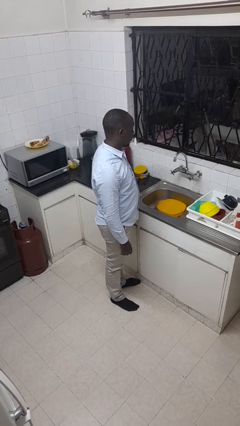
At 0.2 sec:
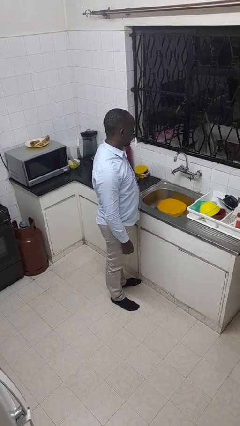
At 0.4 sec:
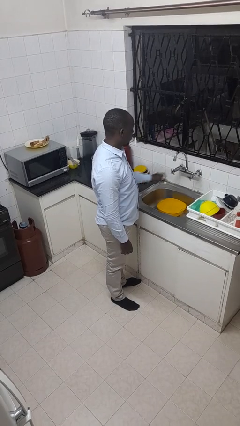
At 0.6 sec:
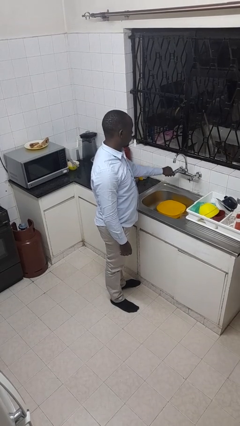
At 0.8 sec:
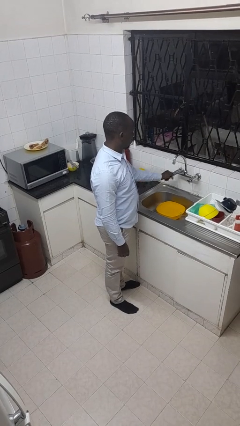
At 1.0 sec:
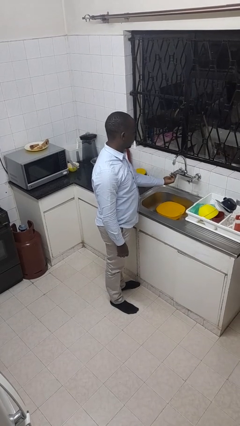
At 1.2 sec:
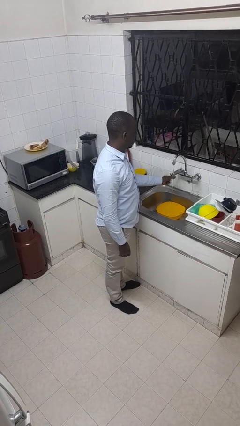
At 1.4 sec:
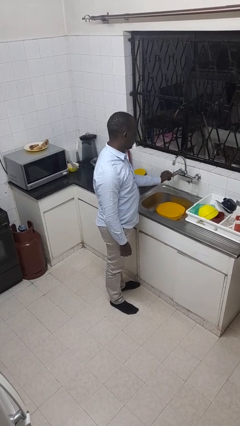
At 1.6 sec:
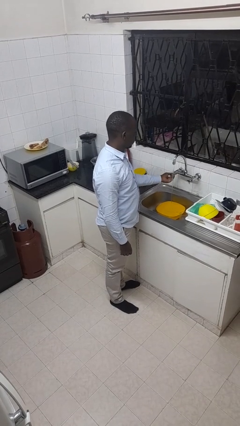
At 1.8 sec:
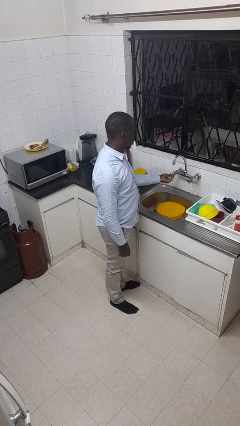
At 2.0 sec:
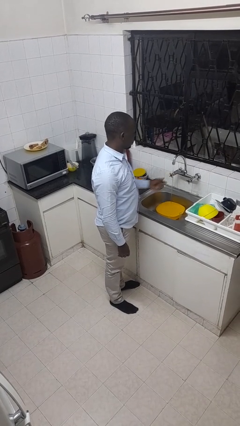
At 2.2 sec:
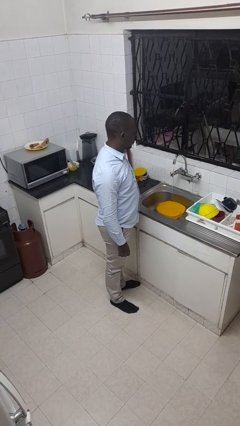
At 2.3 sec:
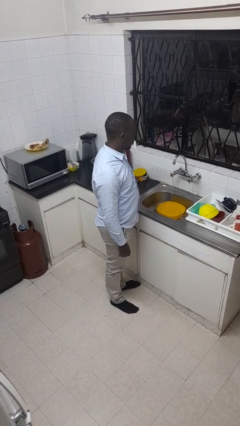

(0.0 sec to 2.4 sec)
person turns on faucet

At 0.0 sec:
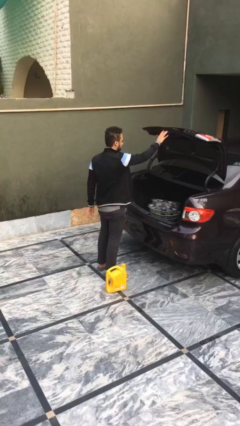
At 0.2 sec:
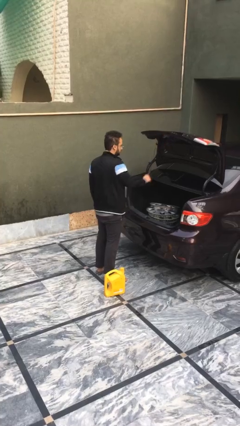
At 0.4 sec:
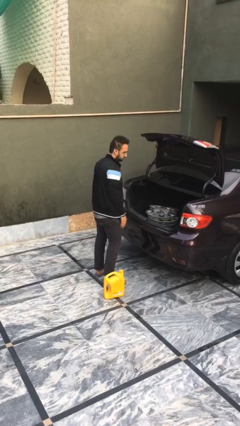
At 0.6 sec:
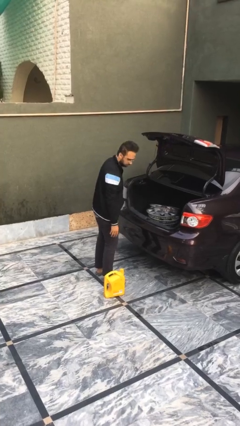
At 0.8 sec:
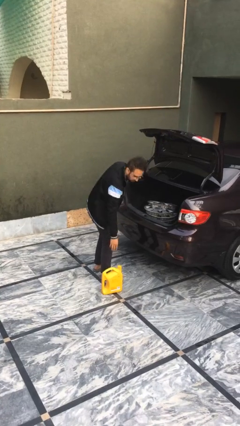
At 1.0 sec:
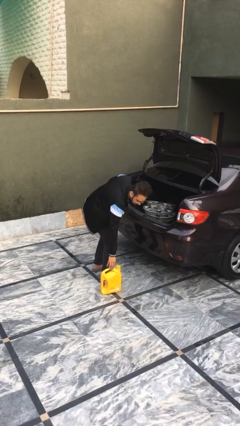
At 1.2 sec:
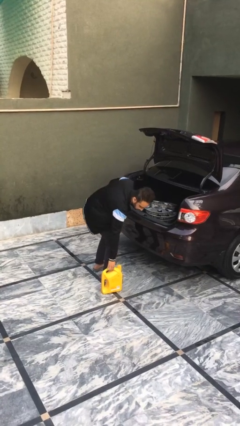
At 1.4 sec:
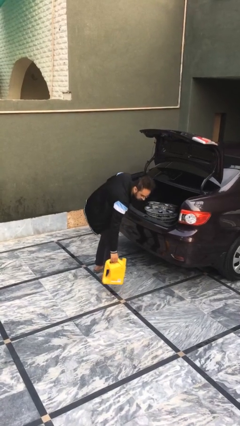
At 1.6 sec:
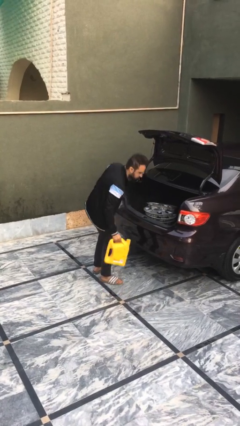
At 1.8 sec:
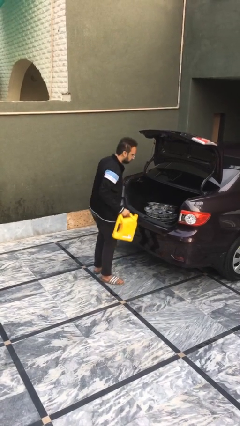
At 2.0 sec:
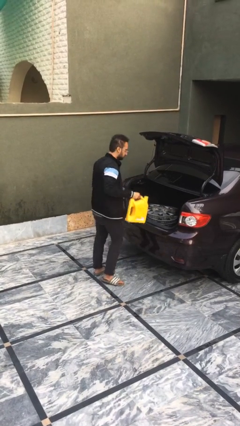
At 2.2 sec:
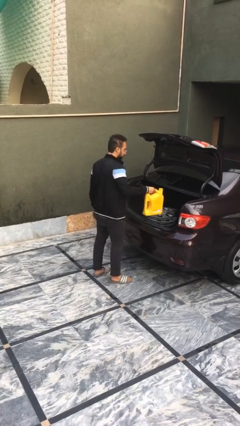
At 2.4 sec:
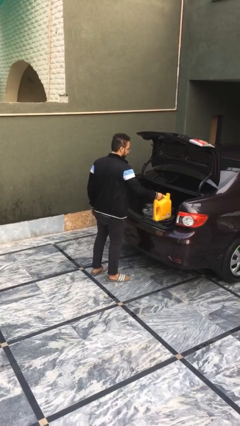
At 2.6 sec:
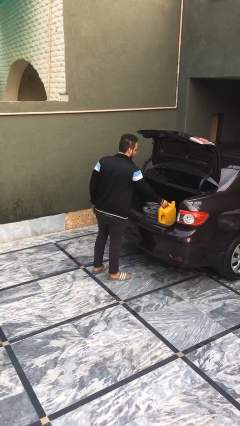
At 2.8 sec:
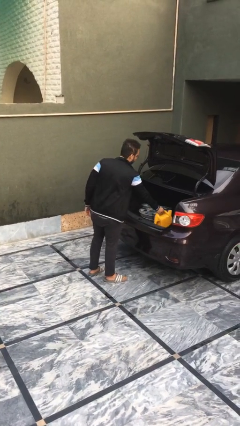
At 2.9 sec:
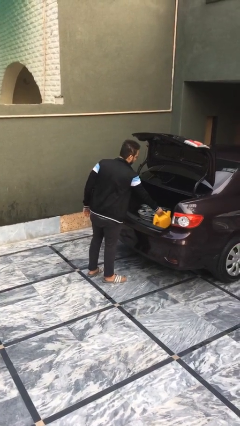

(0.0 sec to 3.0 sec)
person loads car

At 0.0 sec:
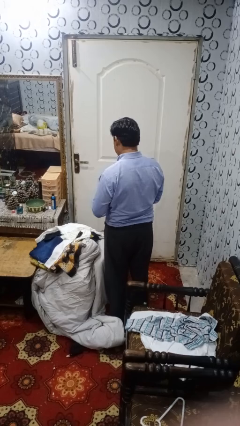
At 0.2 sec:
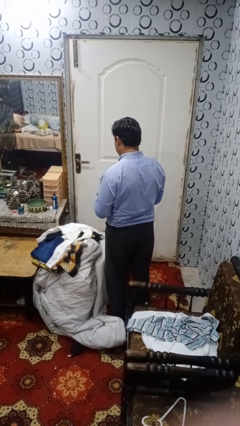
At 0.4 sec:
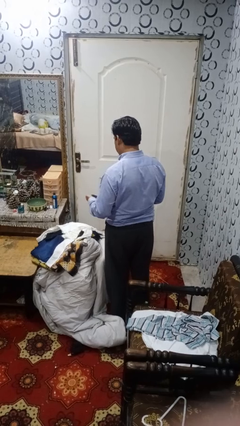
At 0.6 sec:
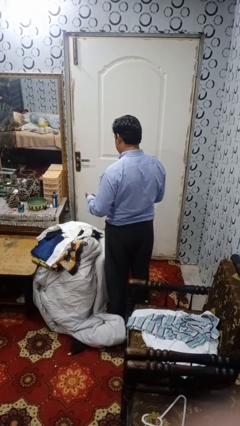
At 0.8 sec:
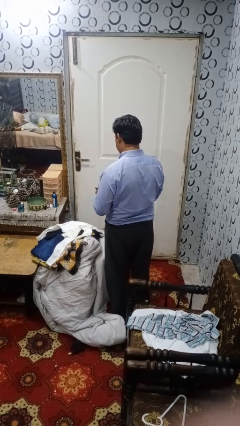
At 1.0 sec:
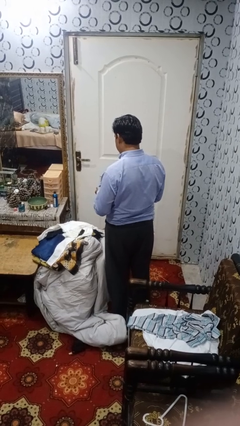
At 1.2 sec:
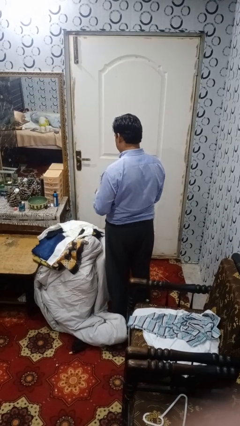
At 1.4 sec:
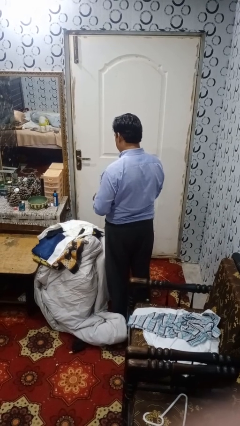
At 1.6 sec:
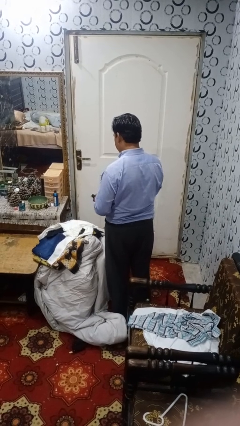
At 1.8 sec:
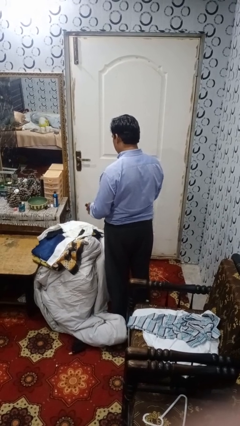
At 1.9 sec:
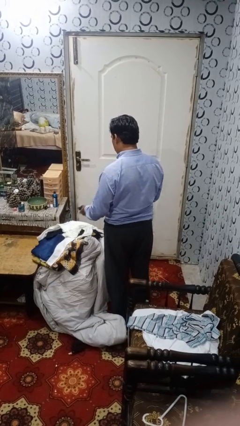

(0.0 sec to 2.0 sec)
person folds socks

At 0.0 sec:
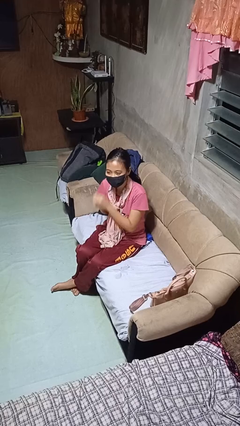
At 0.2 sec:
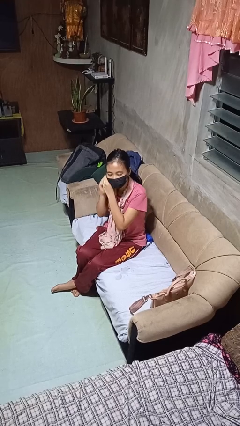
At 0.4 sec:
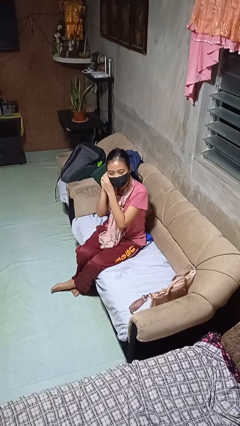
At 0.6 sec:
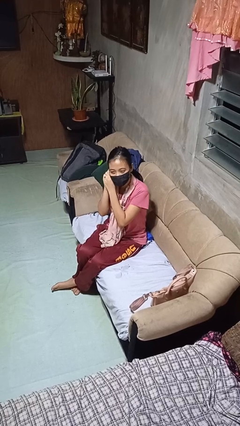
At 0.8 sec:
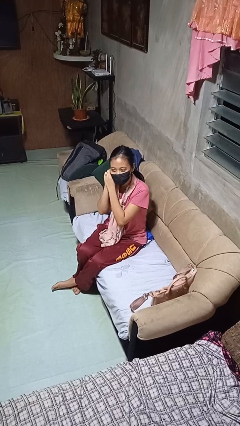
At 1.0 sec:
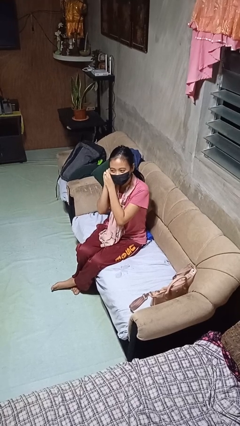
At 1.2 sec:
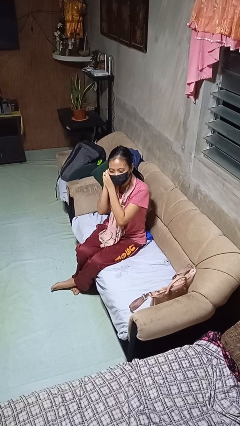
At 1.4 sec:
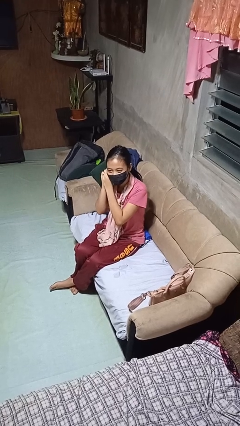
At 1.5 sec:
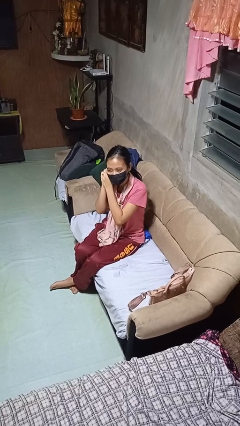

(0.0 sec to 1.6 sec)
person puts on earrings

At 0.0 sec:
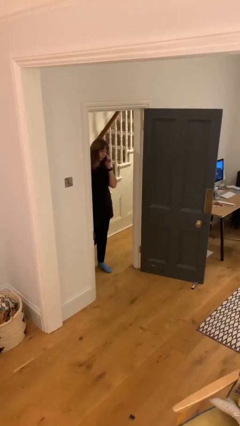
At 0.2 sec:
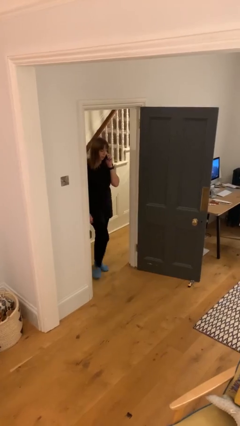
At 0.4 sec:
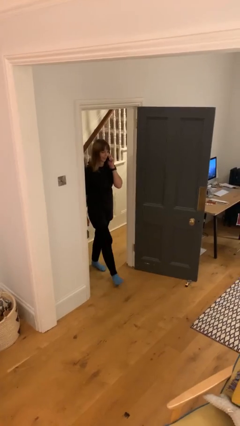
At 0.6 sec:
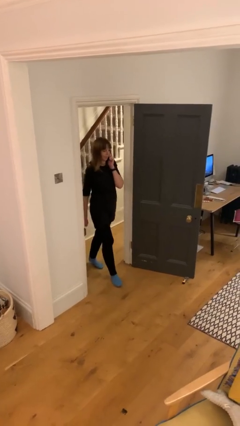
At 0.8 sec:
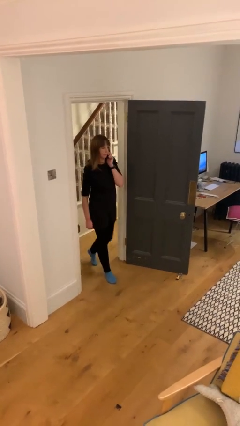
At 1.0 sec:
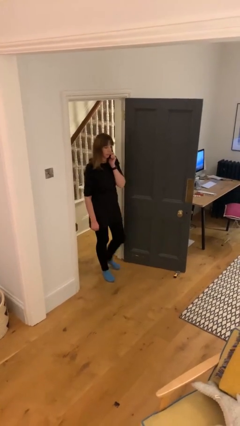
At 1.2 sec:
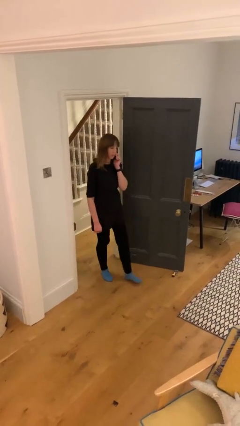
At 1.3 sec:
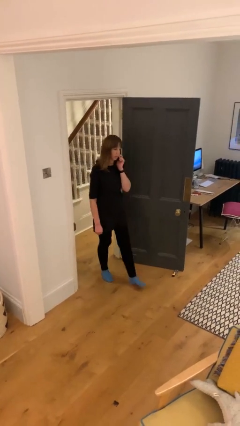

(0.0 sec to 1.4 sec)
person enters scene through structure

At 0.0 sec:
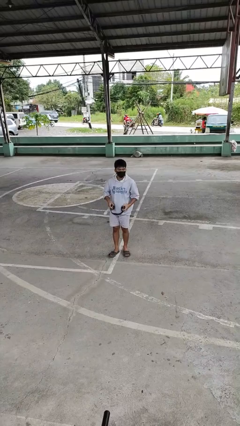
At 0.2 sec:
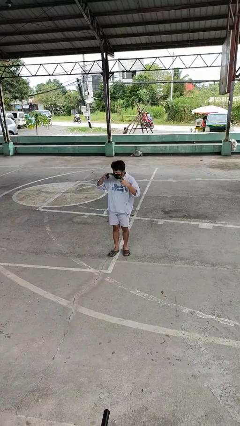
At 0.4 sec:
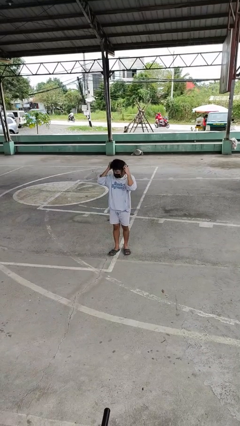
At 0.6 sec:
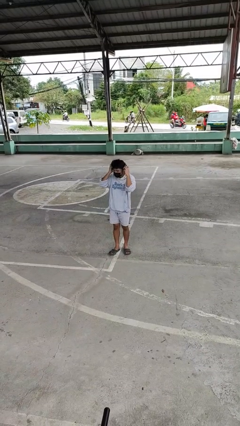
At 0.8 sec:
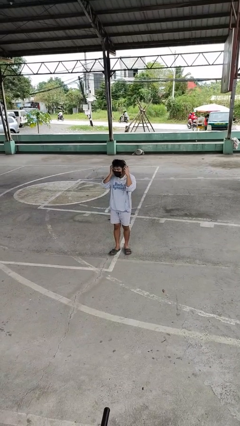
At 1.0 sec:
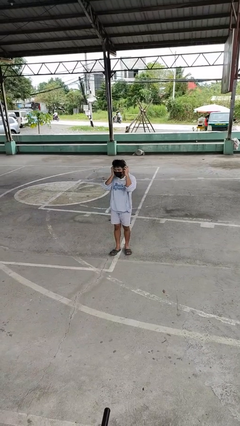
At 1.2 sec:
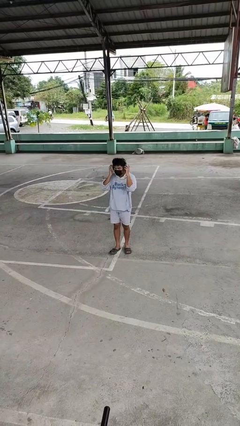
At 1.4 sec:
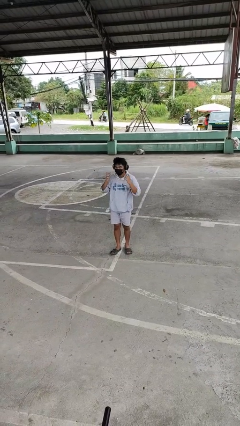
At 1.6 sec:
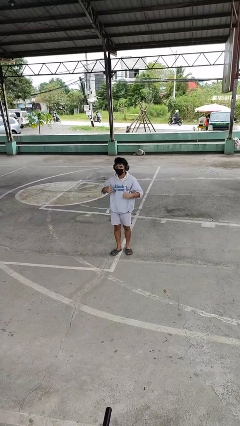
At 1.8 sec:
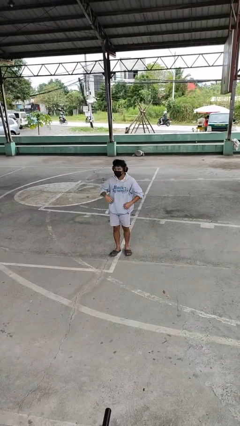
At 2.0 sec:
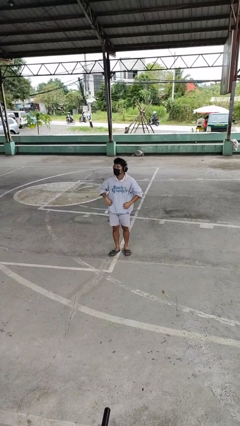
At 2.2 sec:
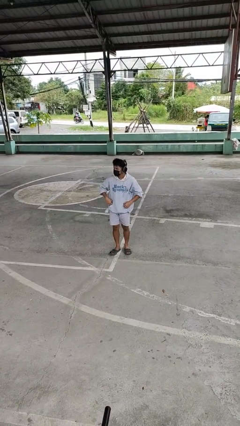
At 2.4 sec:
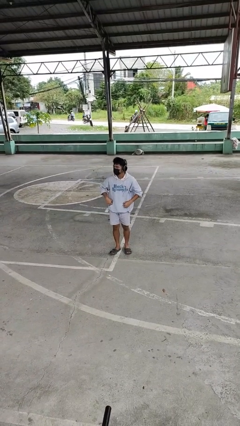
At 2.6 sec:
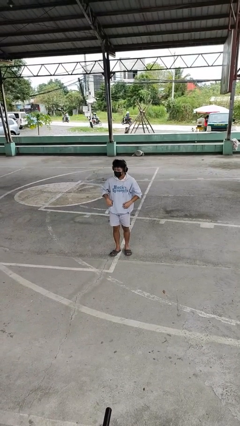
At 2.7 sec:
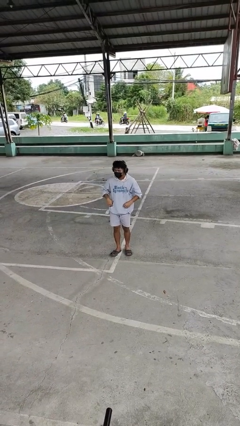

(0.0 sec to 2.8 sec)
person puts on headphones

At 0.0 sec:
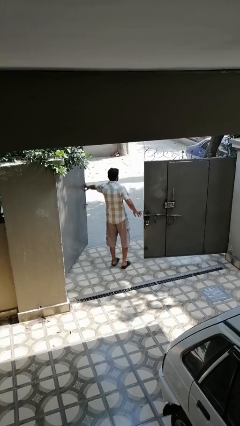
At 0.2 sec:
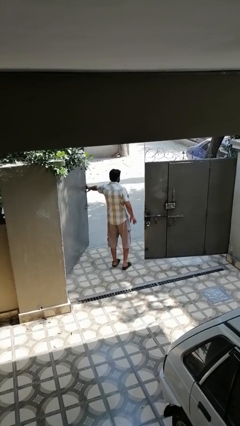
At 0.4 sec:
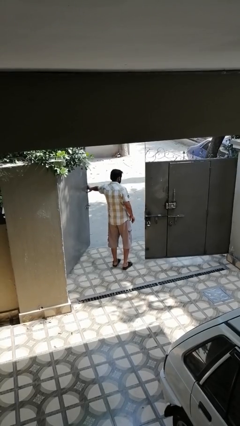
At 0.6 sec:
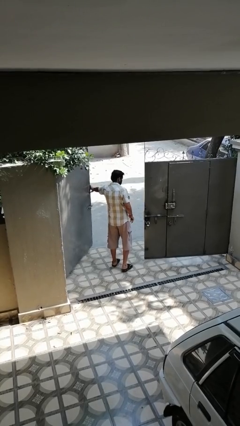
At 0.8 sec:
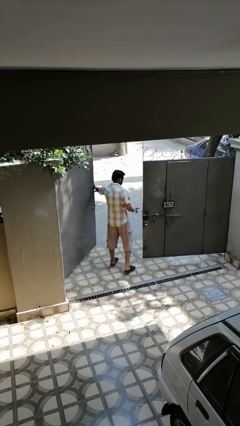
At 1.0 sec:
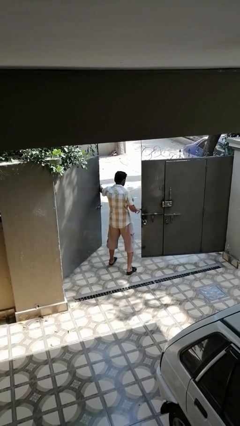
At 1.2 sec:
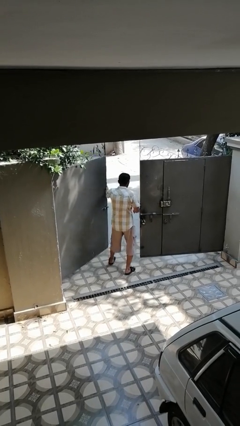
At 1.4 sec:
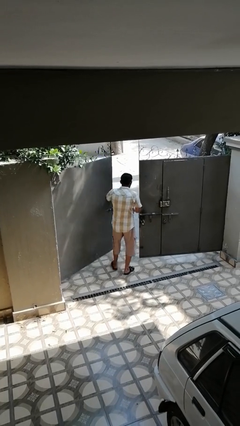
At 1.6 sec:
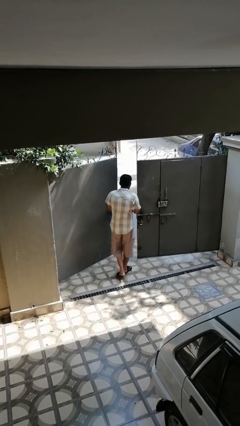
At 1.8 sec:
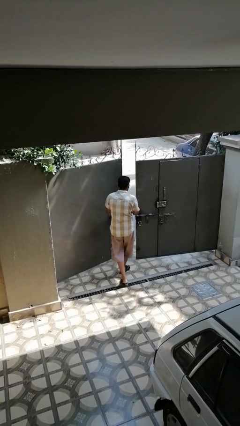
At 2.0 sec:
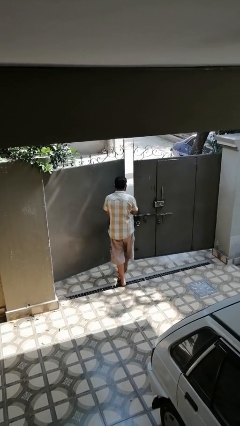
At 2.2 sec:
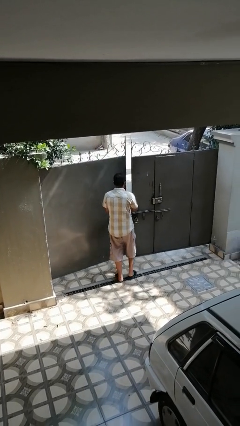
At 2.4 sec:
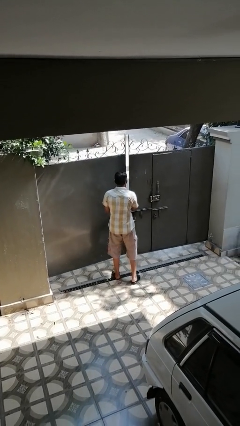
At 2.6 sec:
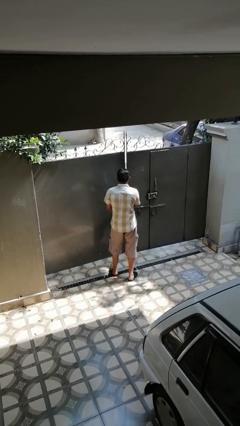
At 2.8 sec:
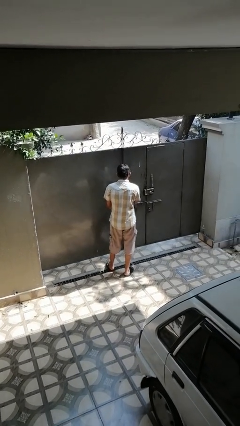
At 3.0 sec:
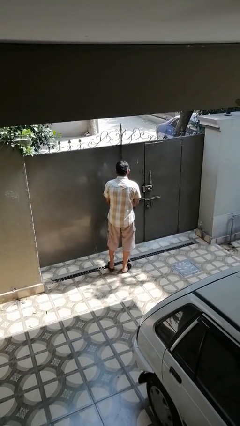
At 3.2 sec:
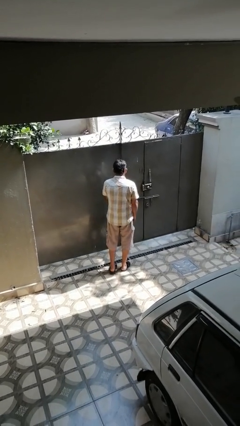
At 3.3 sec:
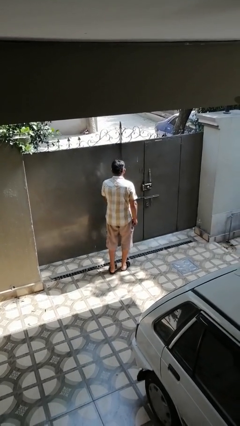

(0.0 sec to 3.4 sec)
person closes gate

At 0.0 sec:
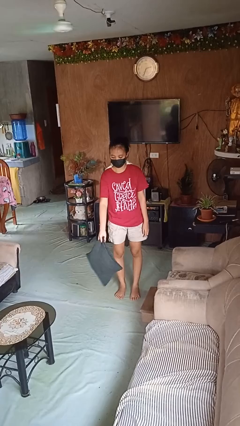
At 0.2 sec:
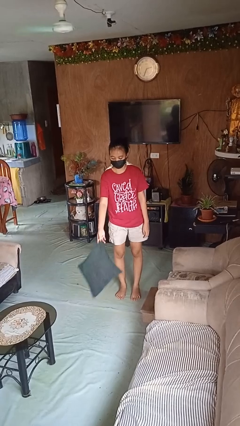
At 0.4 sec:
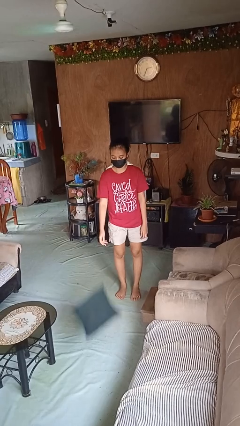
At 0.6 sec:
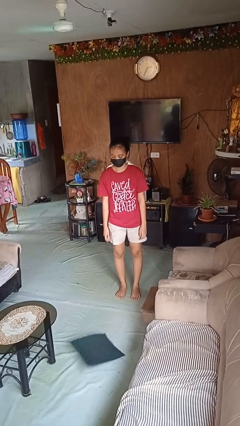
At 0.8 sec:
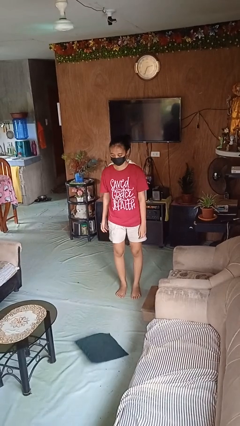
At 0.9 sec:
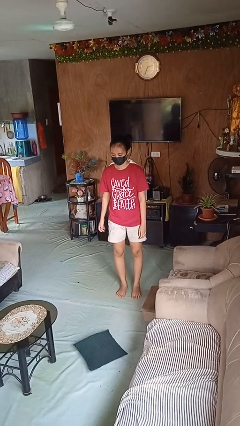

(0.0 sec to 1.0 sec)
person throws object to ground
